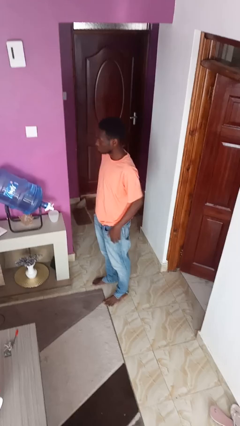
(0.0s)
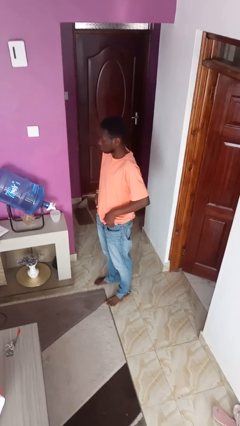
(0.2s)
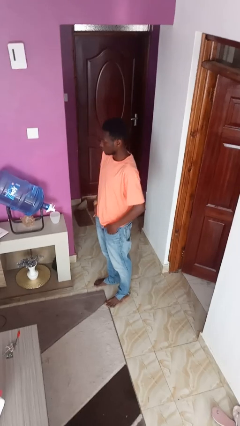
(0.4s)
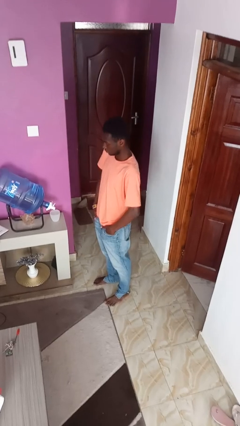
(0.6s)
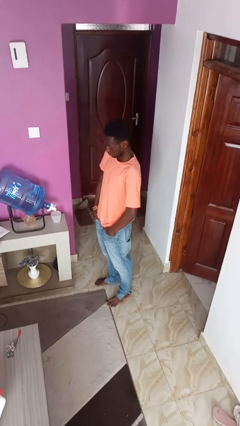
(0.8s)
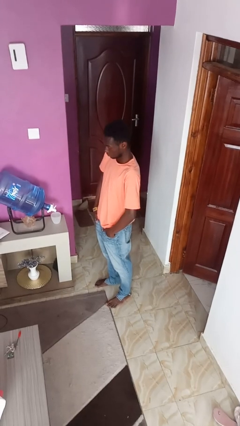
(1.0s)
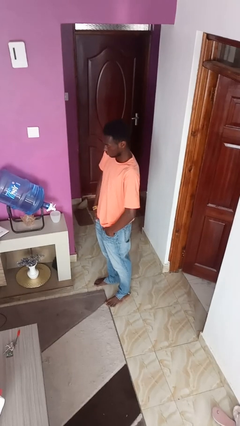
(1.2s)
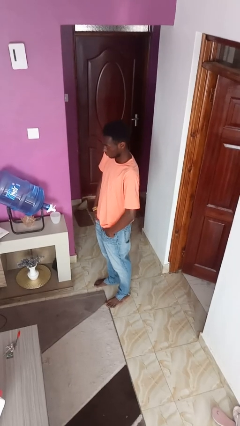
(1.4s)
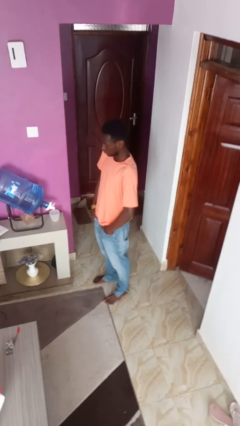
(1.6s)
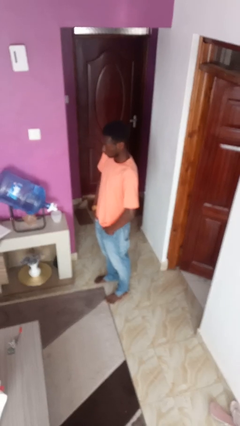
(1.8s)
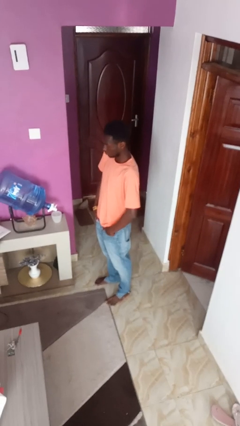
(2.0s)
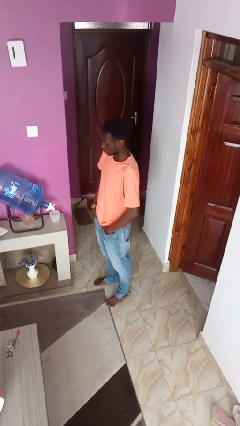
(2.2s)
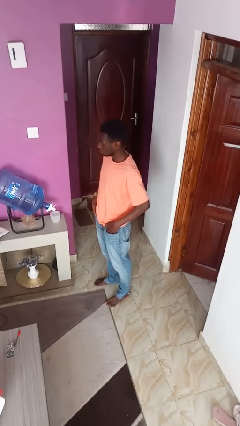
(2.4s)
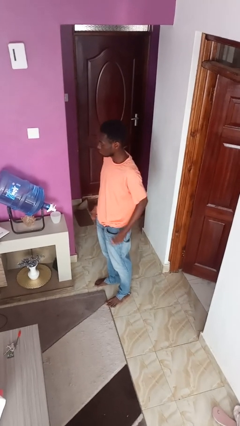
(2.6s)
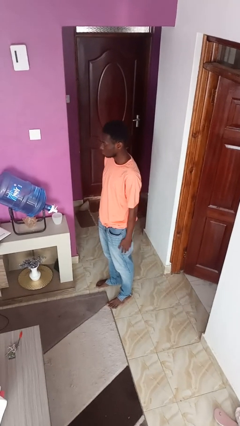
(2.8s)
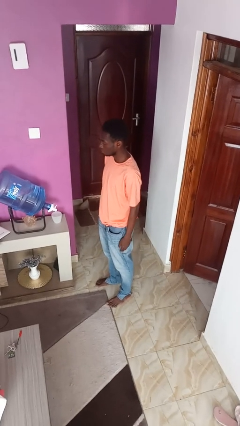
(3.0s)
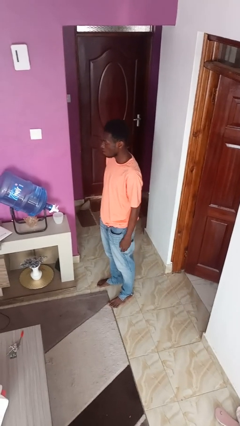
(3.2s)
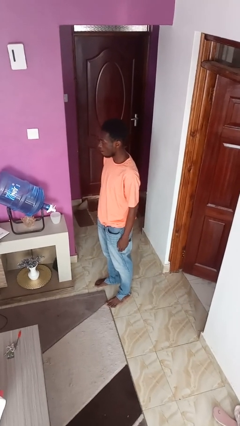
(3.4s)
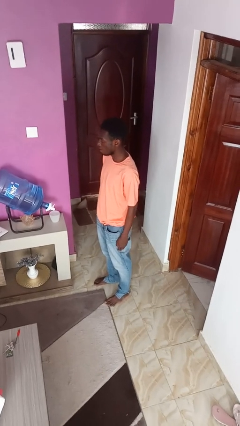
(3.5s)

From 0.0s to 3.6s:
person puts hands in back pockets

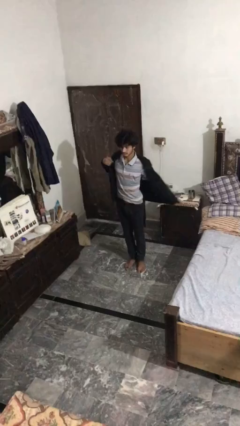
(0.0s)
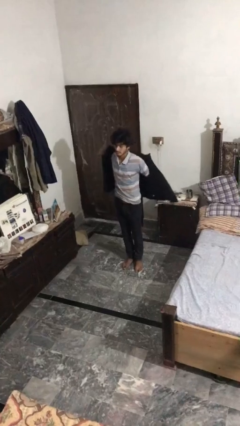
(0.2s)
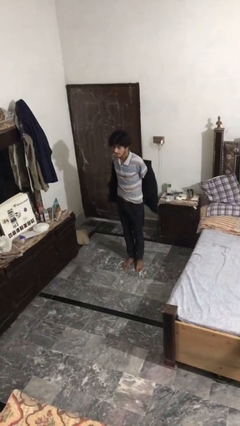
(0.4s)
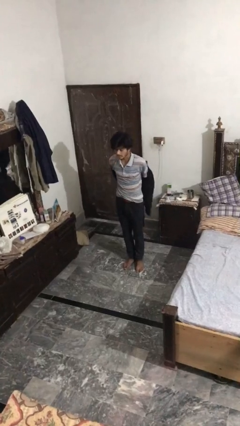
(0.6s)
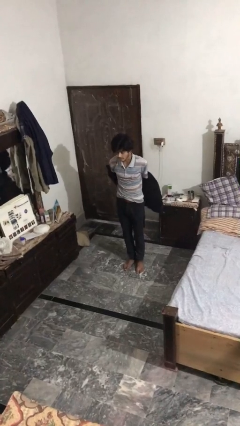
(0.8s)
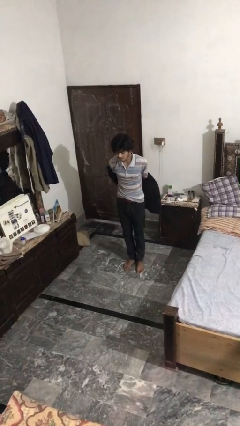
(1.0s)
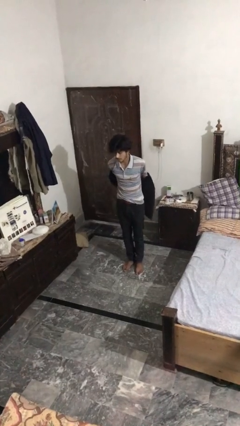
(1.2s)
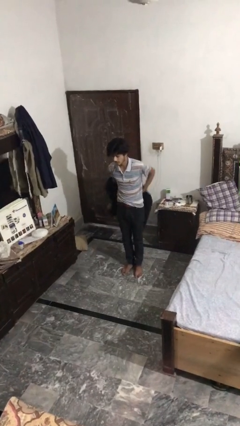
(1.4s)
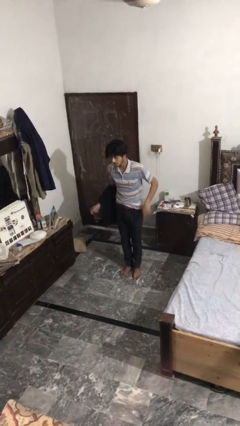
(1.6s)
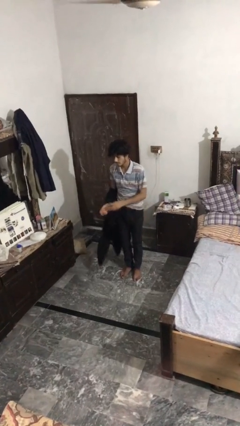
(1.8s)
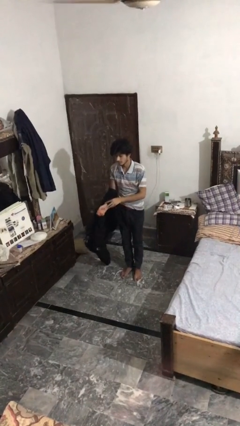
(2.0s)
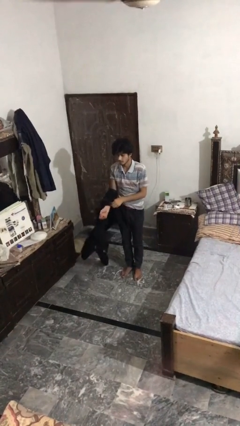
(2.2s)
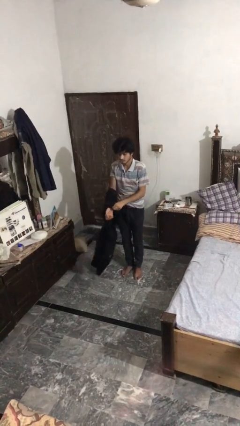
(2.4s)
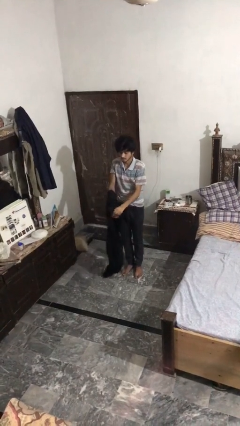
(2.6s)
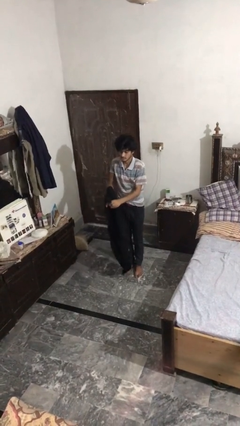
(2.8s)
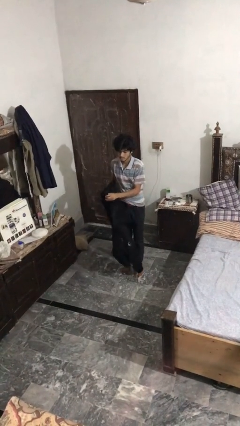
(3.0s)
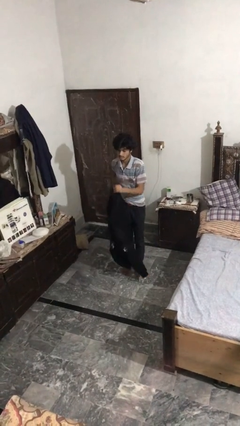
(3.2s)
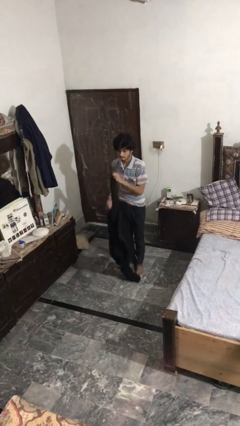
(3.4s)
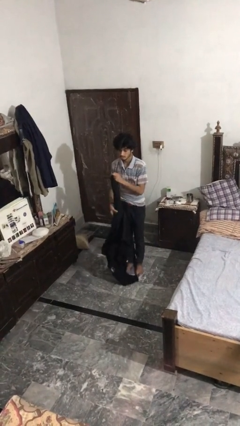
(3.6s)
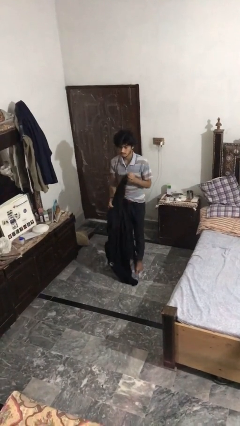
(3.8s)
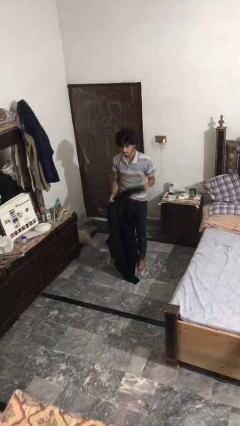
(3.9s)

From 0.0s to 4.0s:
person takes off jacket

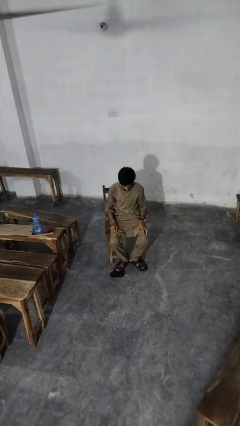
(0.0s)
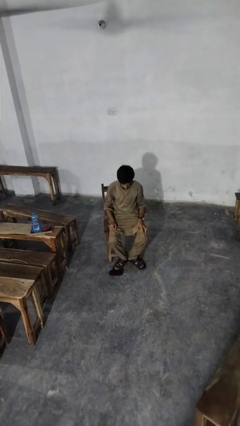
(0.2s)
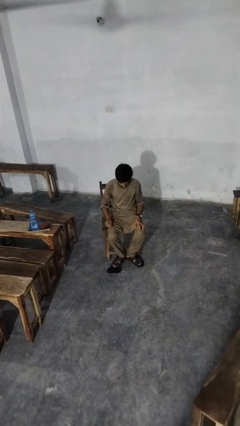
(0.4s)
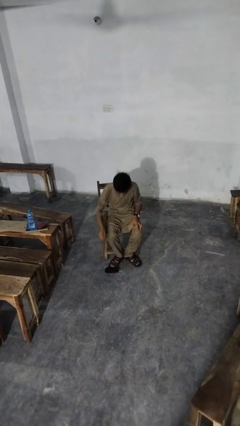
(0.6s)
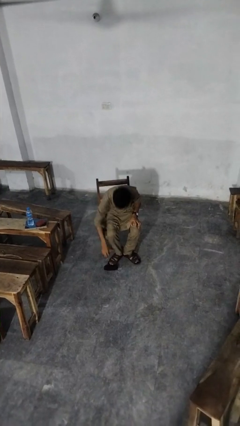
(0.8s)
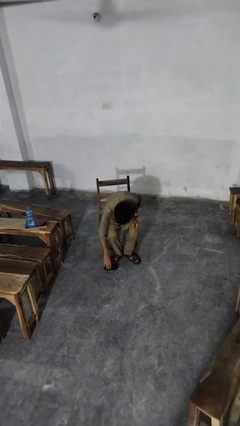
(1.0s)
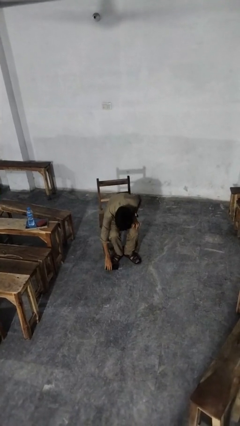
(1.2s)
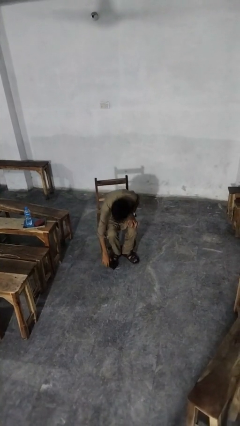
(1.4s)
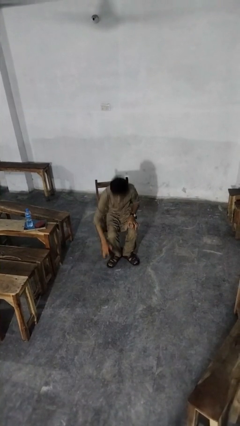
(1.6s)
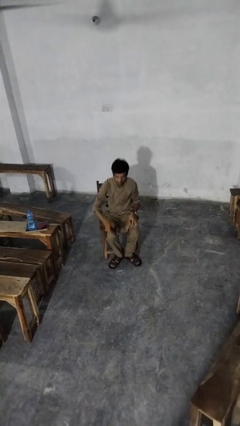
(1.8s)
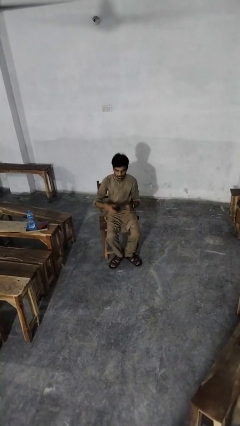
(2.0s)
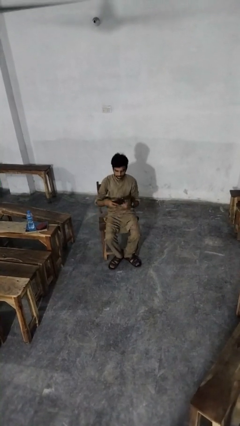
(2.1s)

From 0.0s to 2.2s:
person picks up object from floor

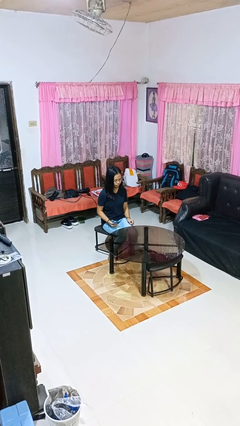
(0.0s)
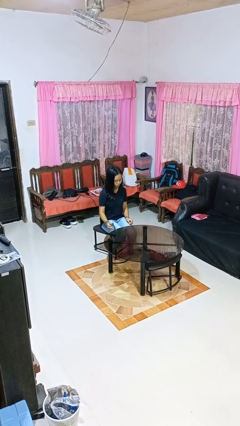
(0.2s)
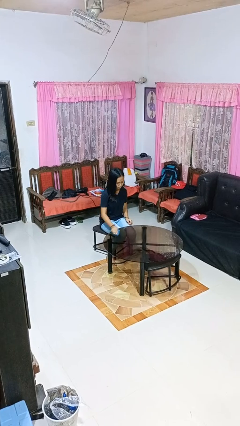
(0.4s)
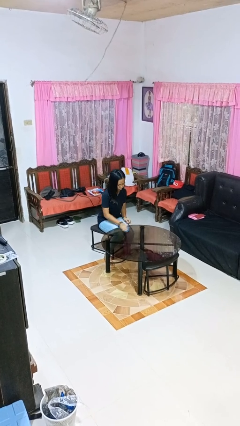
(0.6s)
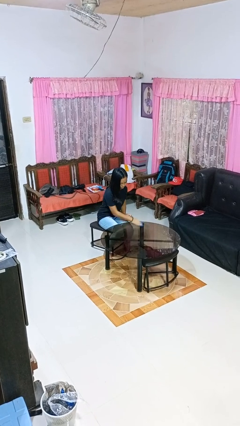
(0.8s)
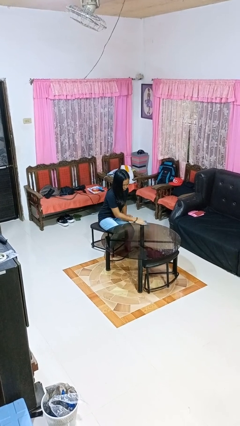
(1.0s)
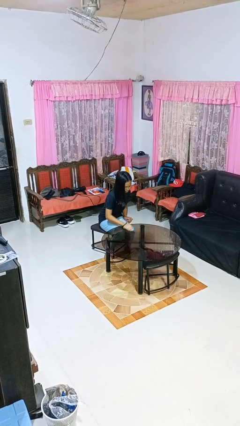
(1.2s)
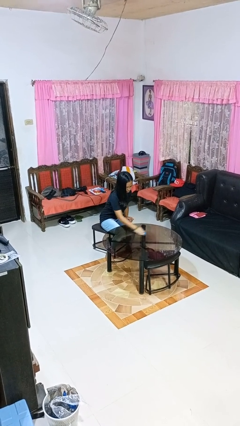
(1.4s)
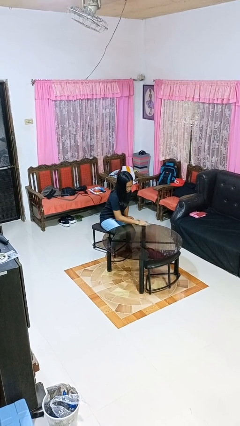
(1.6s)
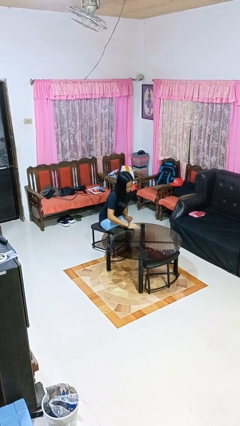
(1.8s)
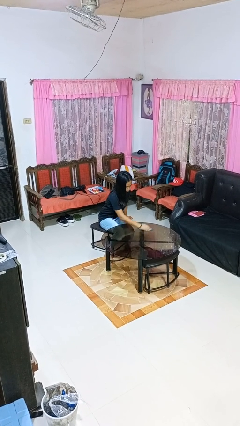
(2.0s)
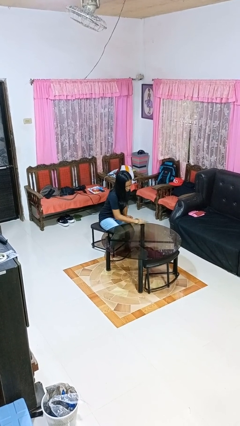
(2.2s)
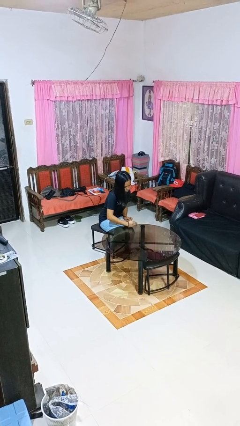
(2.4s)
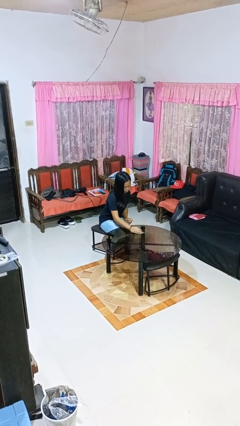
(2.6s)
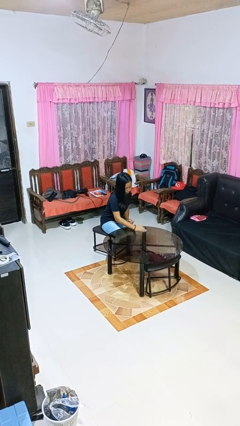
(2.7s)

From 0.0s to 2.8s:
person cleans table with rag

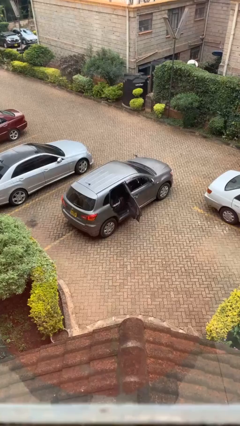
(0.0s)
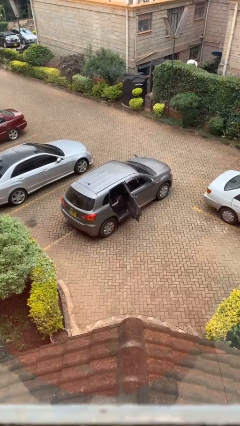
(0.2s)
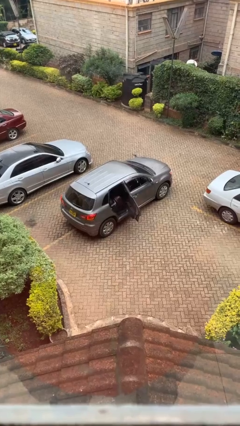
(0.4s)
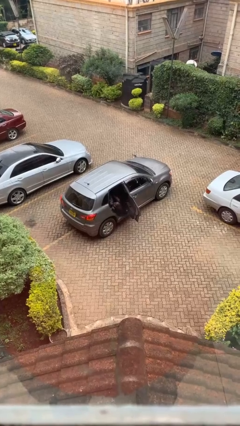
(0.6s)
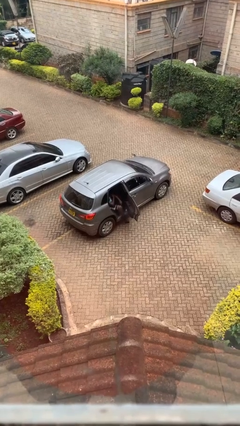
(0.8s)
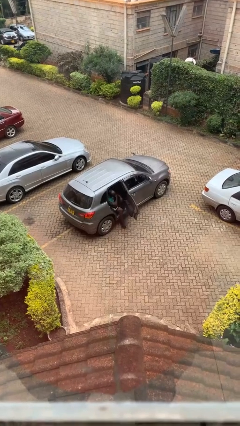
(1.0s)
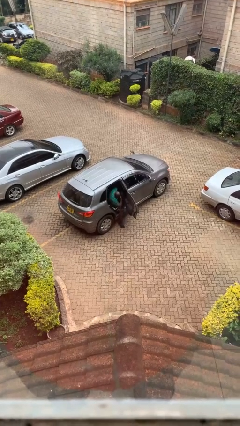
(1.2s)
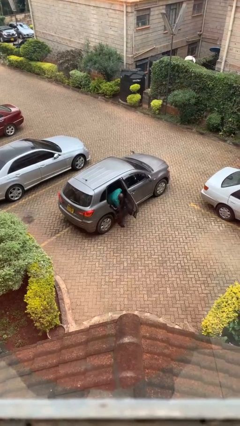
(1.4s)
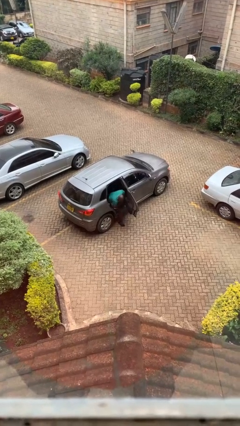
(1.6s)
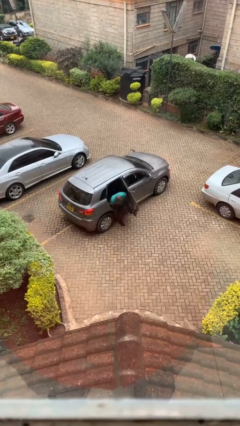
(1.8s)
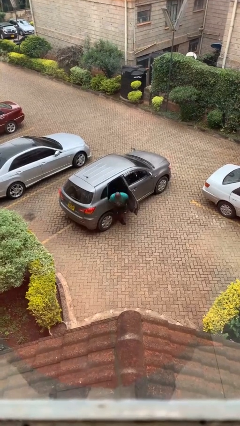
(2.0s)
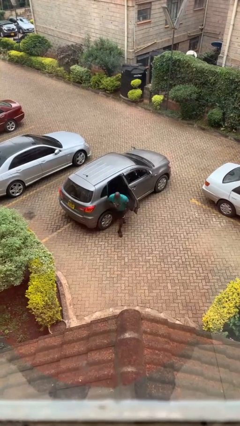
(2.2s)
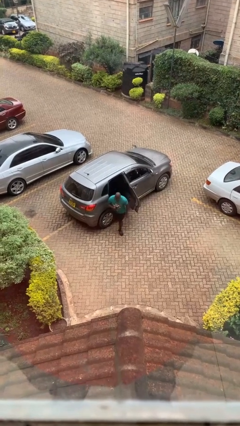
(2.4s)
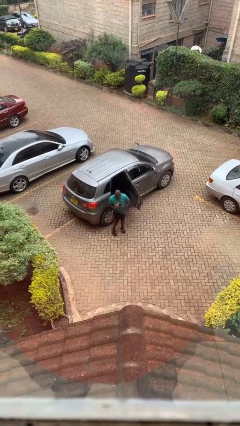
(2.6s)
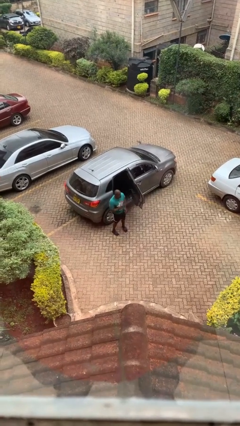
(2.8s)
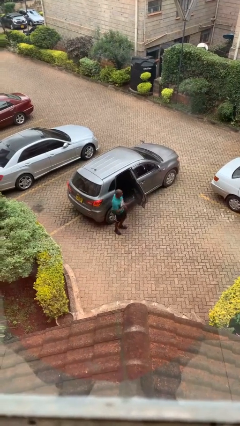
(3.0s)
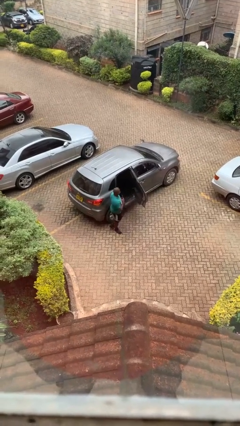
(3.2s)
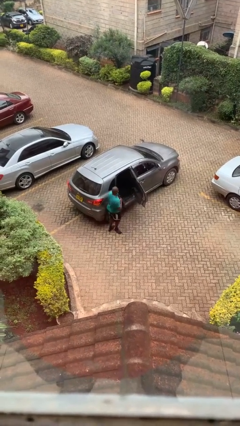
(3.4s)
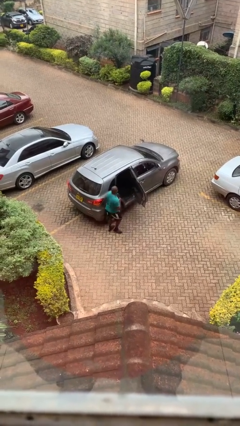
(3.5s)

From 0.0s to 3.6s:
person exits car

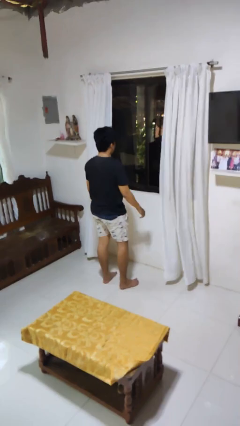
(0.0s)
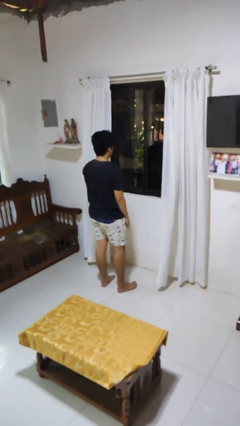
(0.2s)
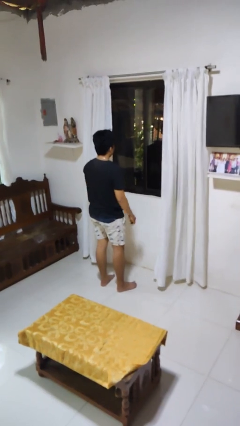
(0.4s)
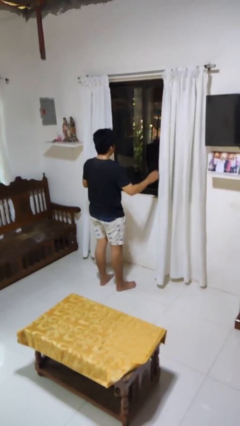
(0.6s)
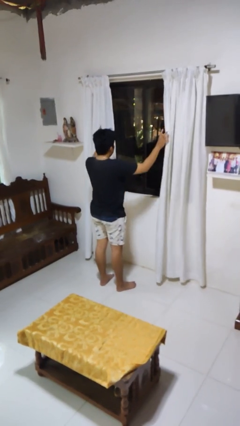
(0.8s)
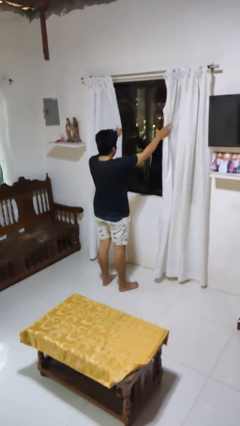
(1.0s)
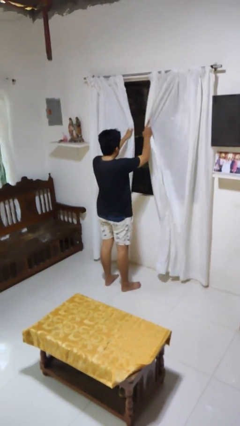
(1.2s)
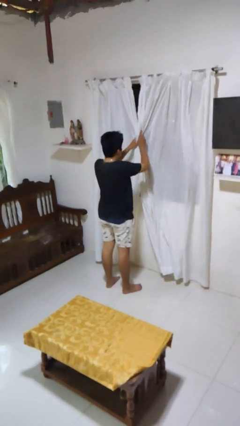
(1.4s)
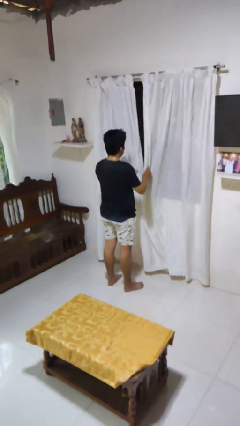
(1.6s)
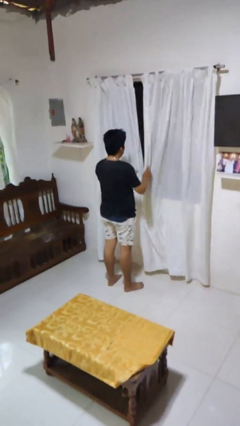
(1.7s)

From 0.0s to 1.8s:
person closes curtains
